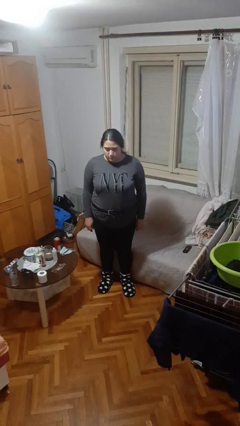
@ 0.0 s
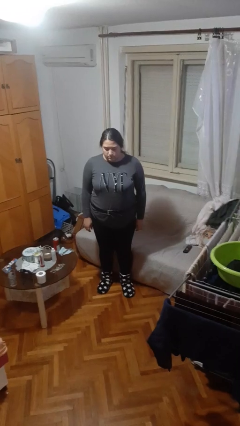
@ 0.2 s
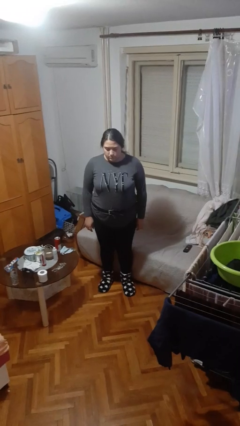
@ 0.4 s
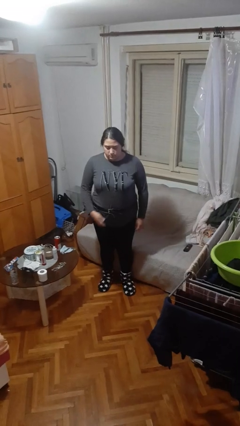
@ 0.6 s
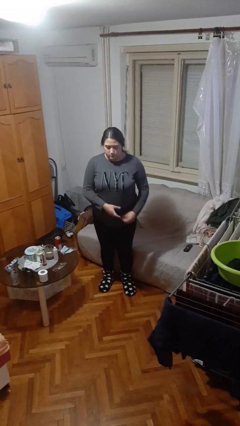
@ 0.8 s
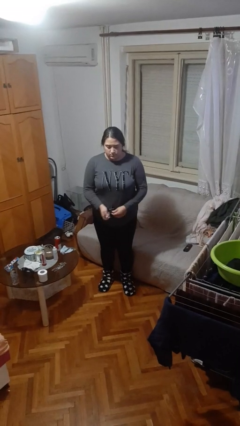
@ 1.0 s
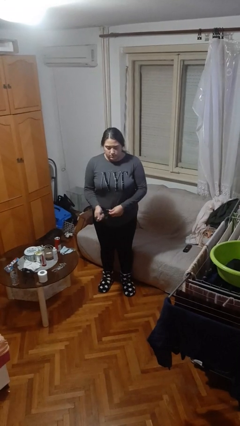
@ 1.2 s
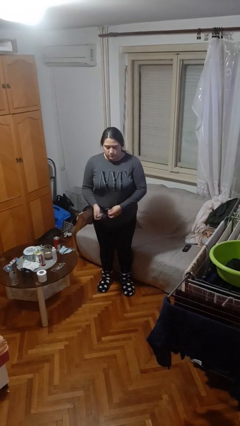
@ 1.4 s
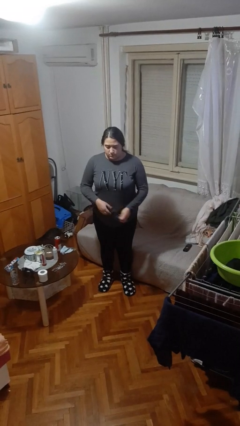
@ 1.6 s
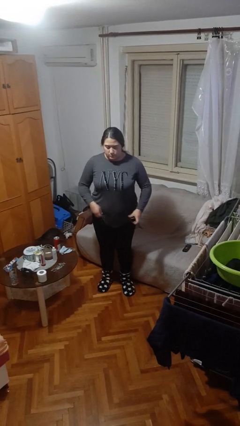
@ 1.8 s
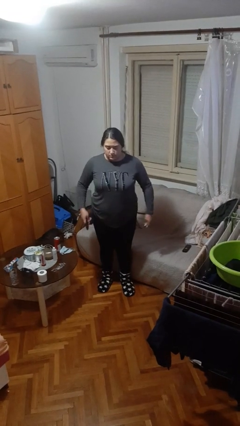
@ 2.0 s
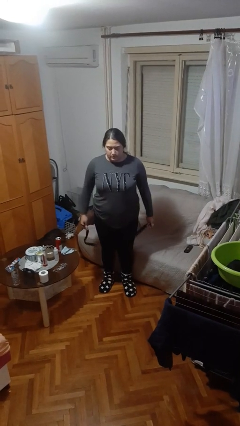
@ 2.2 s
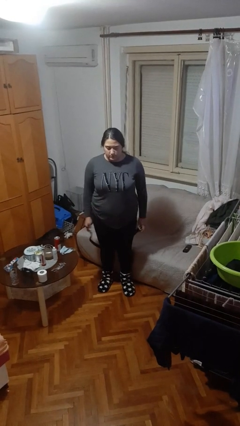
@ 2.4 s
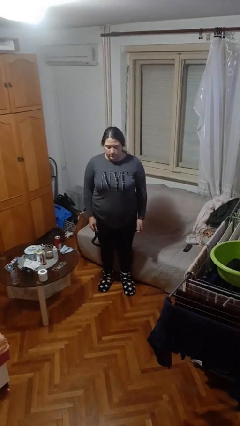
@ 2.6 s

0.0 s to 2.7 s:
person takes off belt

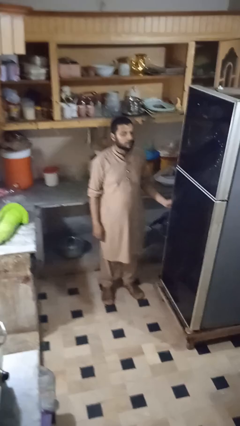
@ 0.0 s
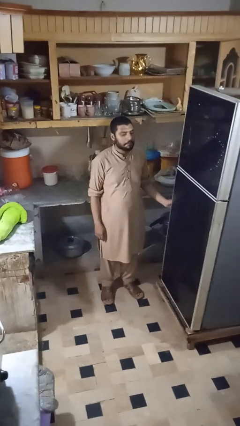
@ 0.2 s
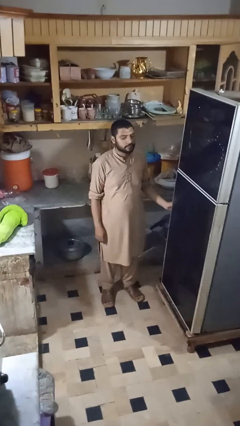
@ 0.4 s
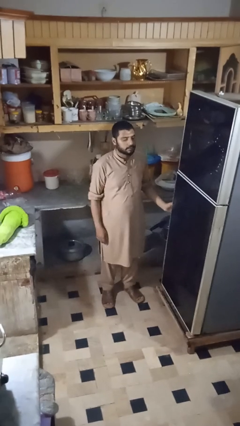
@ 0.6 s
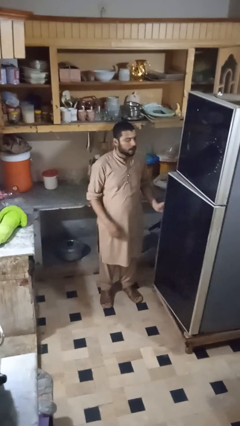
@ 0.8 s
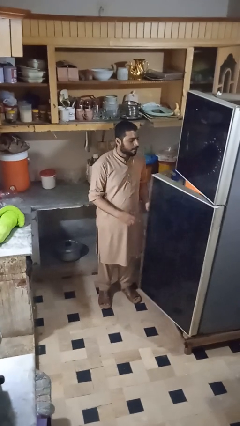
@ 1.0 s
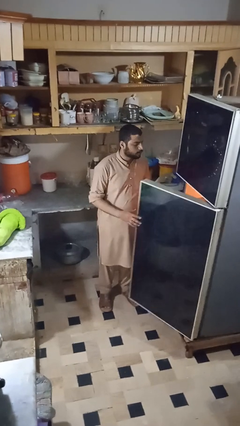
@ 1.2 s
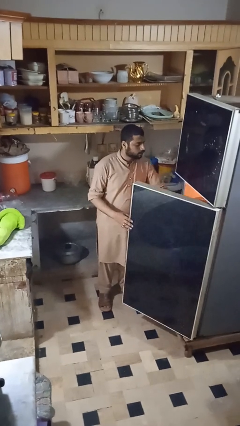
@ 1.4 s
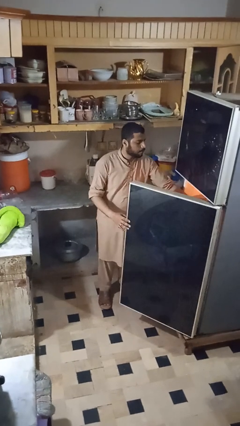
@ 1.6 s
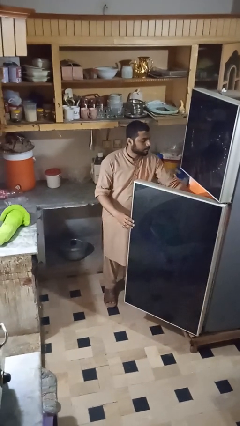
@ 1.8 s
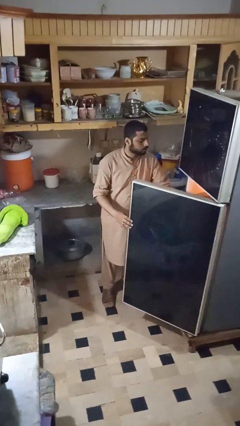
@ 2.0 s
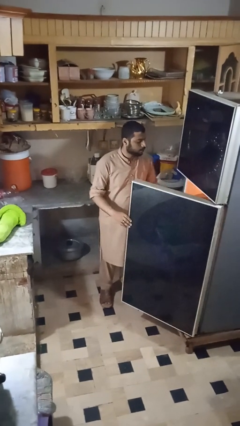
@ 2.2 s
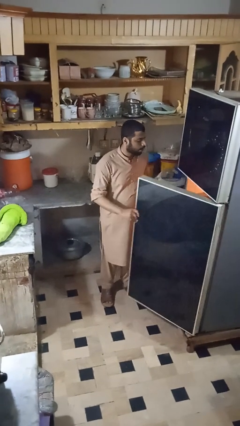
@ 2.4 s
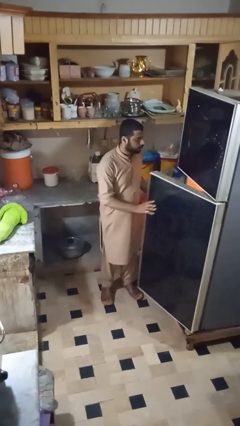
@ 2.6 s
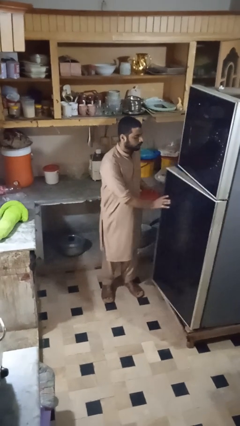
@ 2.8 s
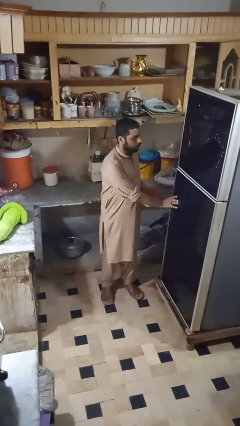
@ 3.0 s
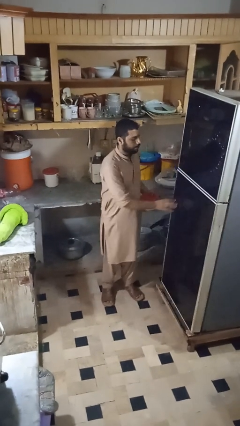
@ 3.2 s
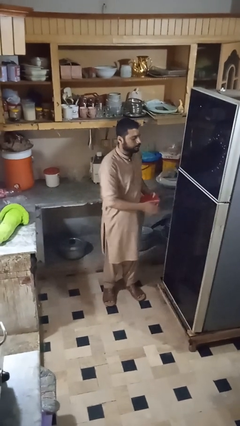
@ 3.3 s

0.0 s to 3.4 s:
person takes object from refrigerator

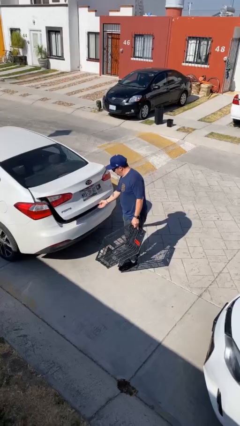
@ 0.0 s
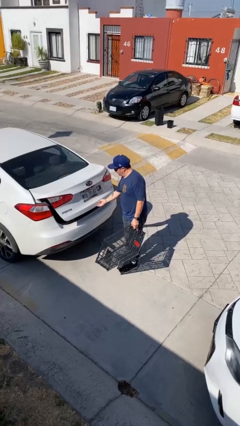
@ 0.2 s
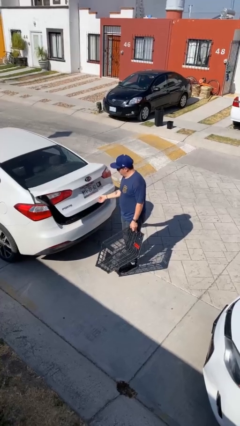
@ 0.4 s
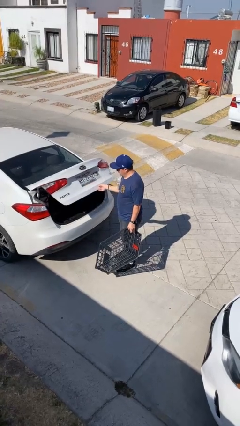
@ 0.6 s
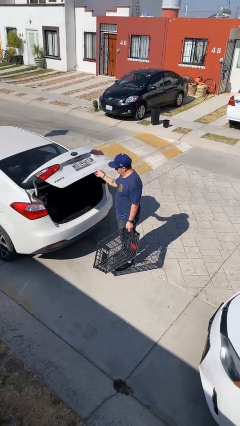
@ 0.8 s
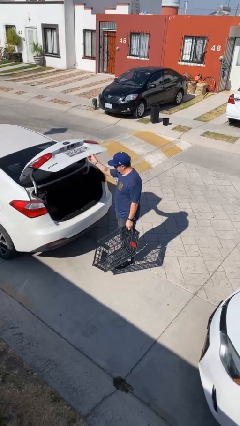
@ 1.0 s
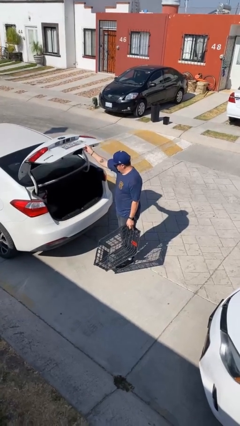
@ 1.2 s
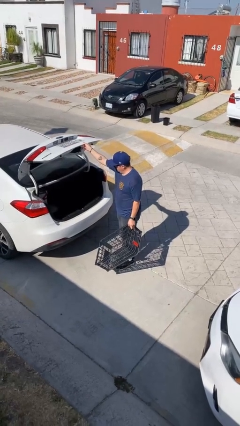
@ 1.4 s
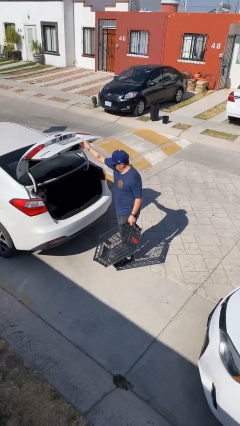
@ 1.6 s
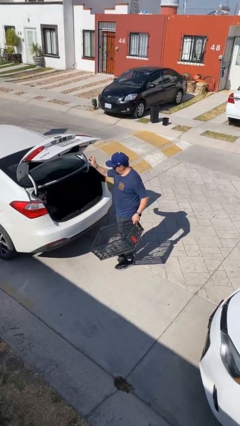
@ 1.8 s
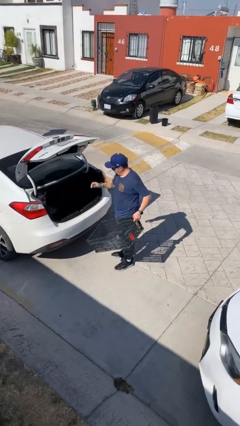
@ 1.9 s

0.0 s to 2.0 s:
person opens car trunk

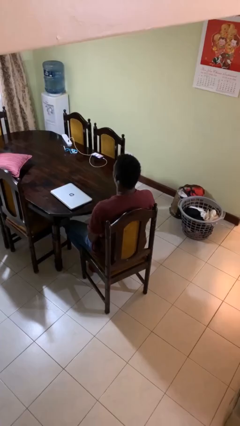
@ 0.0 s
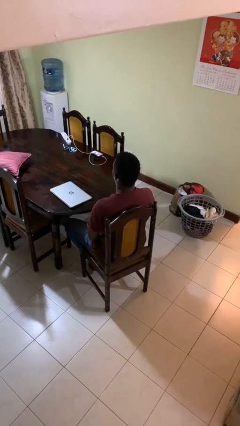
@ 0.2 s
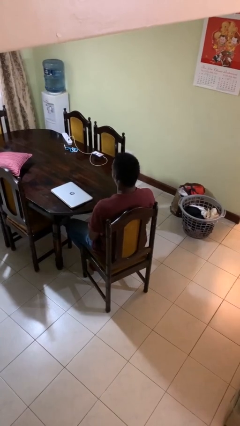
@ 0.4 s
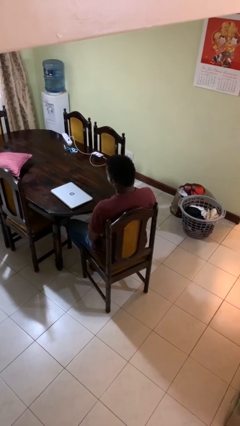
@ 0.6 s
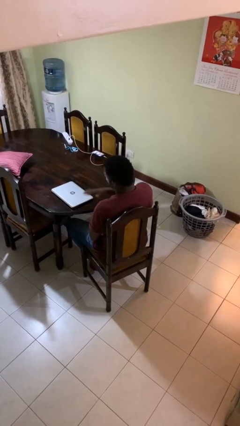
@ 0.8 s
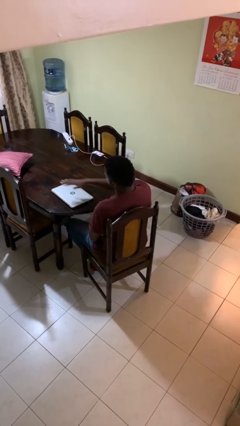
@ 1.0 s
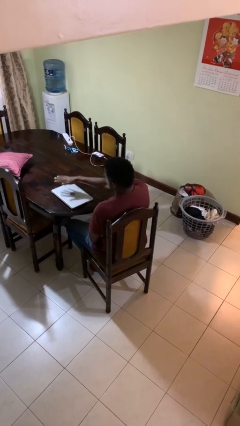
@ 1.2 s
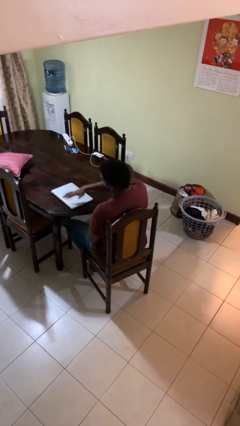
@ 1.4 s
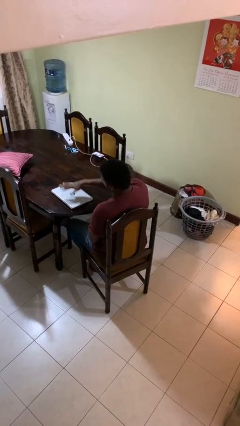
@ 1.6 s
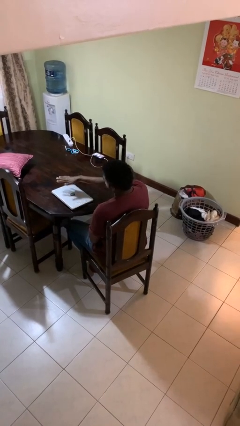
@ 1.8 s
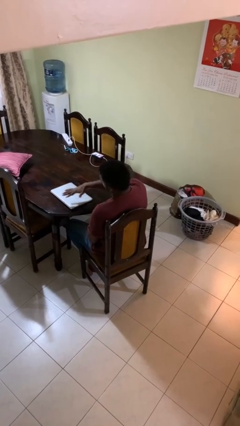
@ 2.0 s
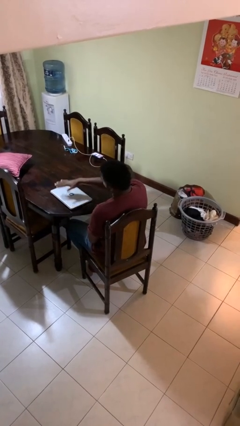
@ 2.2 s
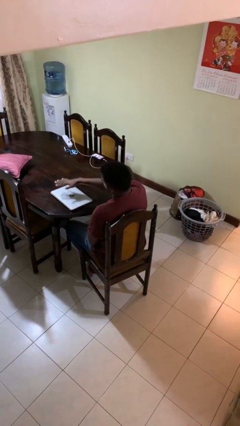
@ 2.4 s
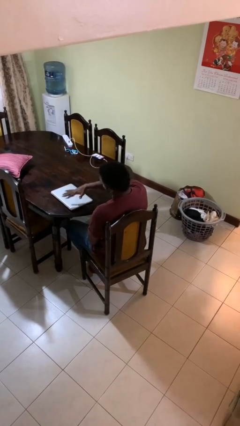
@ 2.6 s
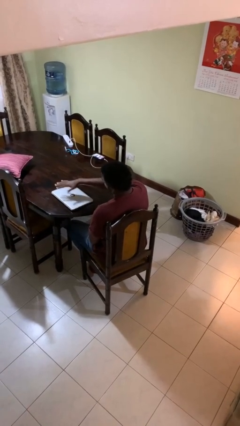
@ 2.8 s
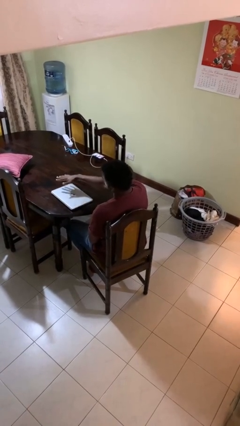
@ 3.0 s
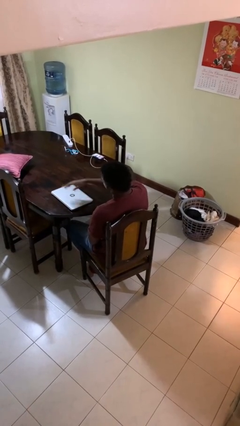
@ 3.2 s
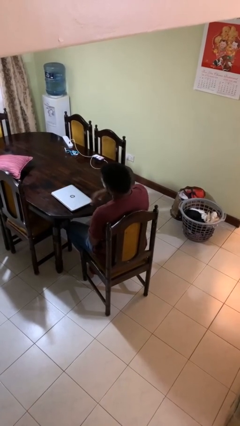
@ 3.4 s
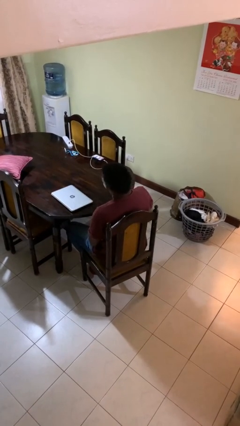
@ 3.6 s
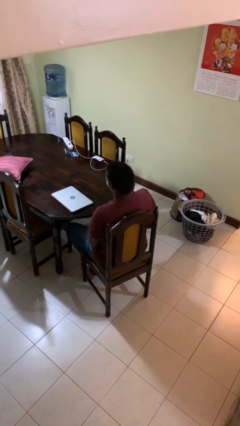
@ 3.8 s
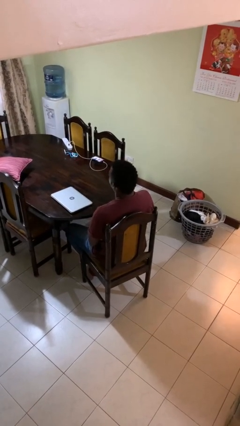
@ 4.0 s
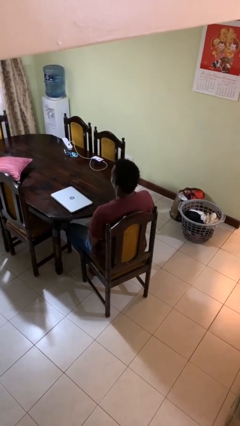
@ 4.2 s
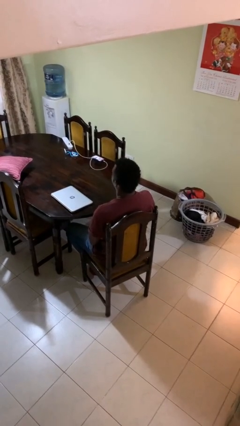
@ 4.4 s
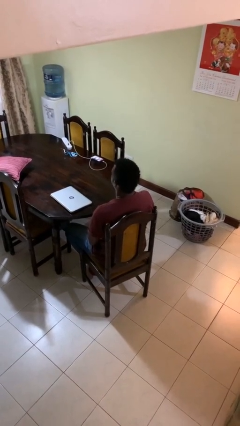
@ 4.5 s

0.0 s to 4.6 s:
person waves hand over object

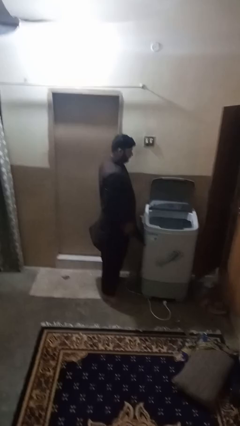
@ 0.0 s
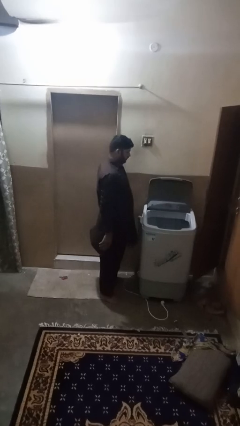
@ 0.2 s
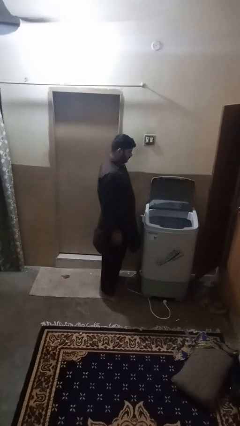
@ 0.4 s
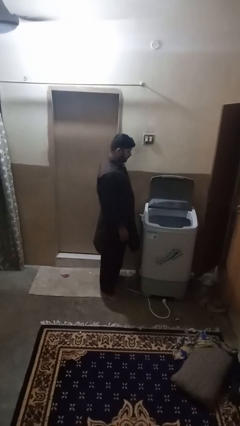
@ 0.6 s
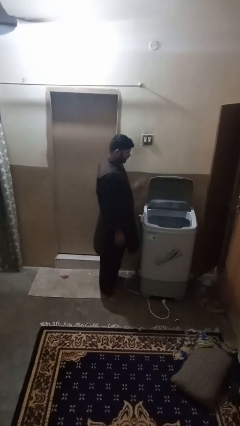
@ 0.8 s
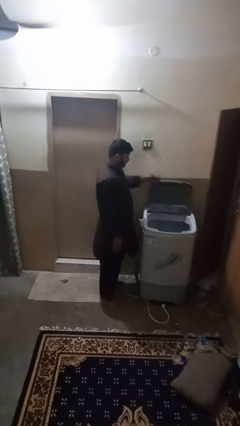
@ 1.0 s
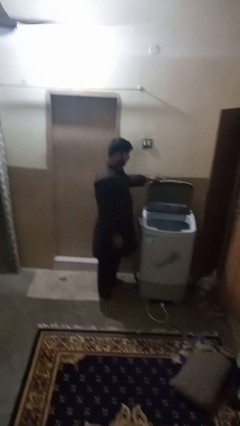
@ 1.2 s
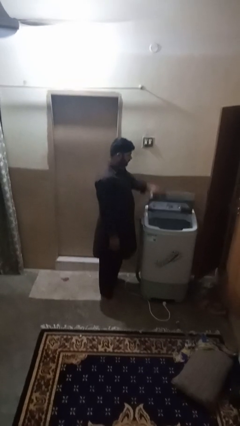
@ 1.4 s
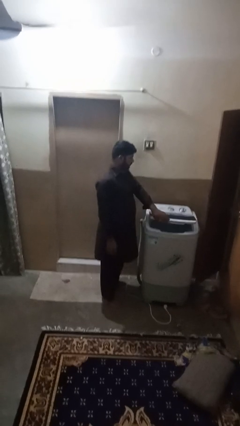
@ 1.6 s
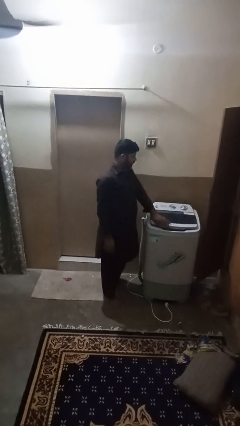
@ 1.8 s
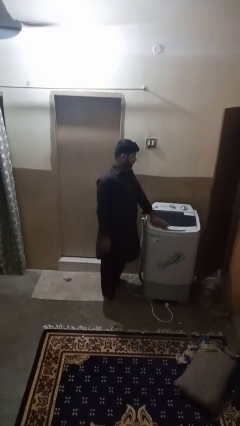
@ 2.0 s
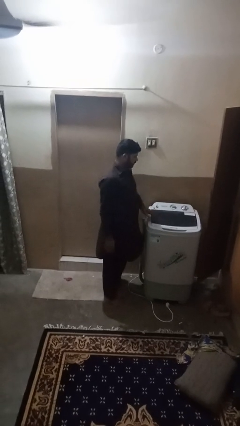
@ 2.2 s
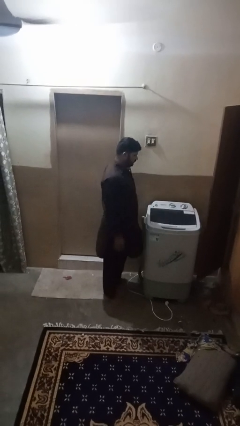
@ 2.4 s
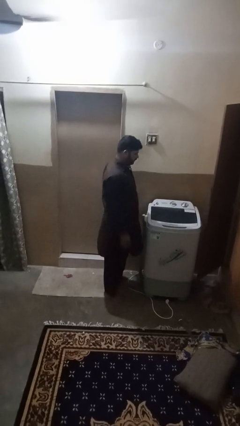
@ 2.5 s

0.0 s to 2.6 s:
person closes clothes washer

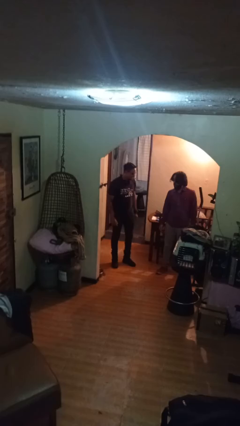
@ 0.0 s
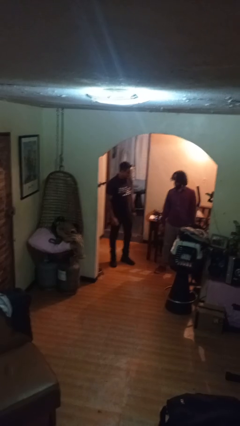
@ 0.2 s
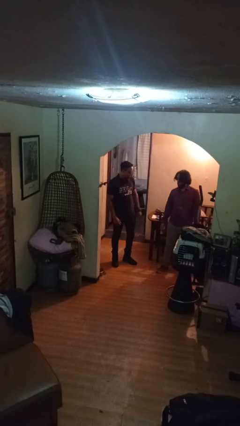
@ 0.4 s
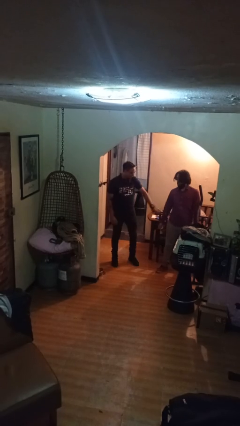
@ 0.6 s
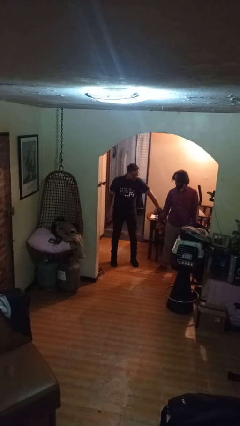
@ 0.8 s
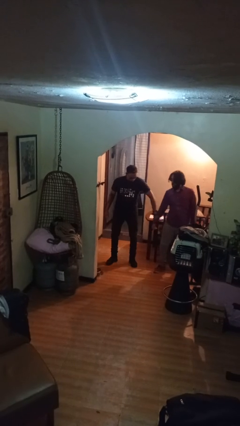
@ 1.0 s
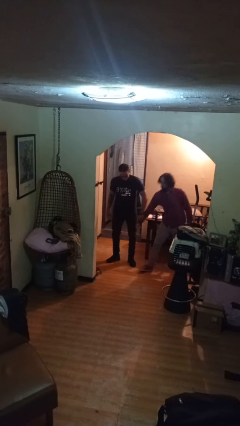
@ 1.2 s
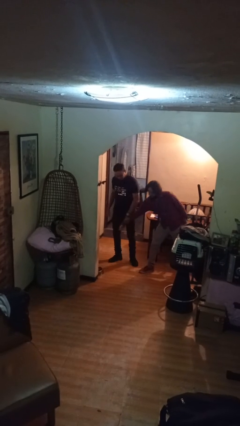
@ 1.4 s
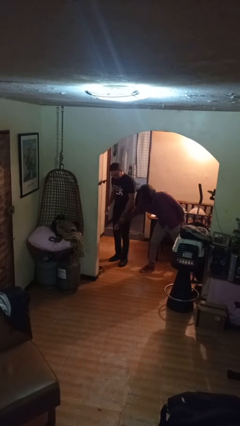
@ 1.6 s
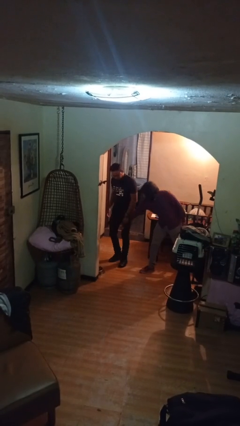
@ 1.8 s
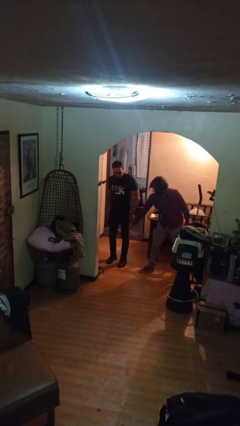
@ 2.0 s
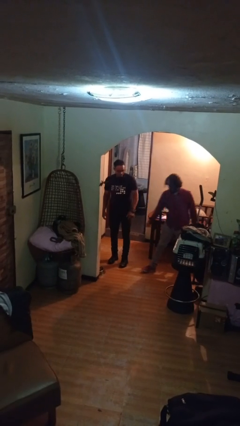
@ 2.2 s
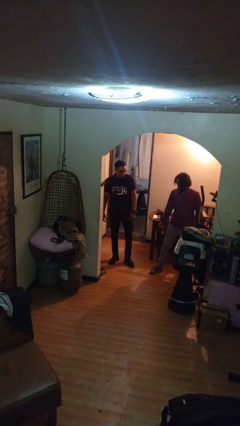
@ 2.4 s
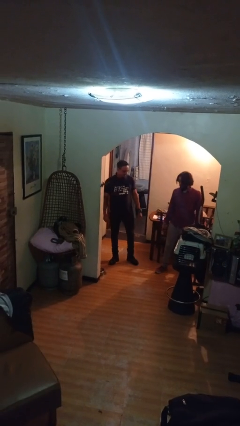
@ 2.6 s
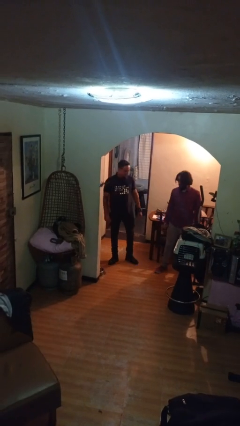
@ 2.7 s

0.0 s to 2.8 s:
person grabs person by forearm
